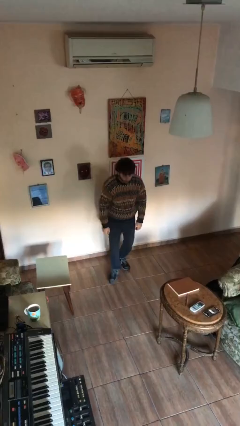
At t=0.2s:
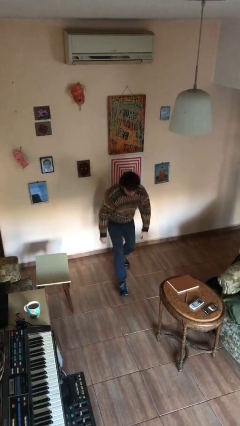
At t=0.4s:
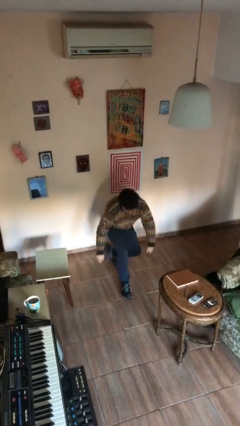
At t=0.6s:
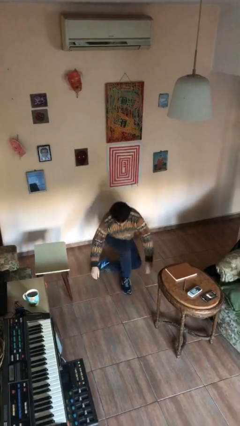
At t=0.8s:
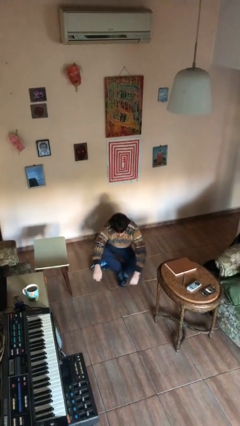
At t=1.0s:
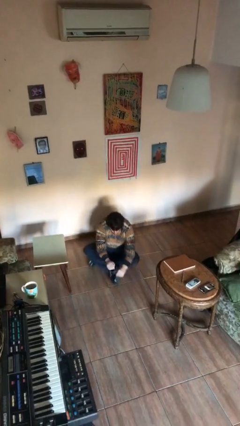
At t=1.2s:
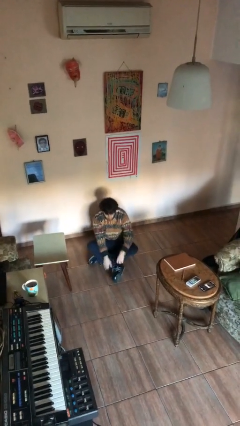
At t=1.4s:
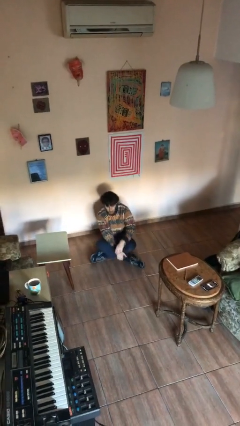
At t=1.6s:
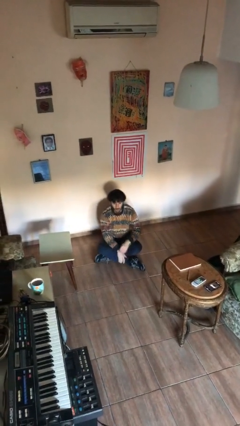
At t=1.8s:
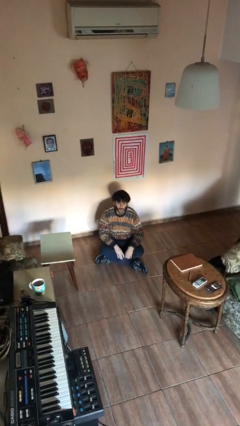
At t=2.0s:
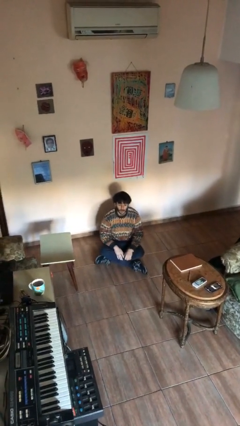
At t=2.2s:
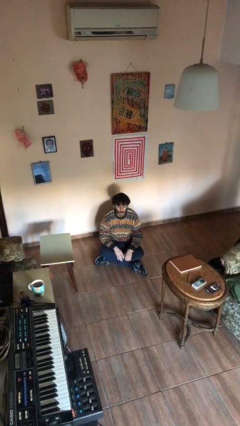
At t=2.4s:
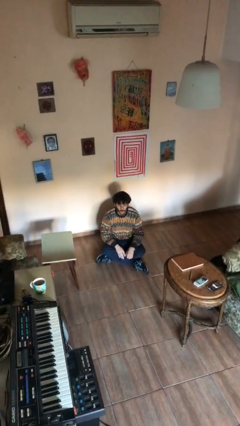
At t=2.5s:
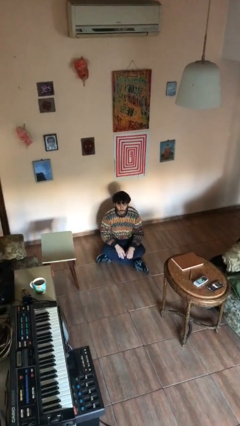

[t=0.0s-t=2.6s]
person sits crisscross

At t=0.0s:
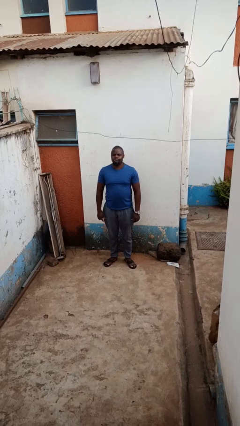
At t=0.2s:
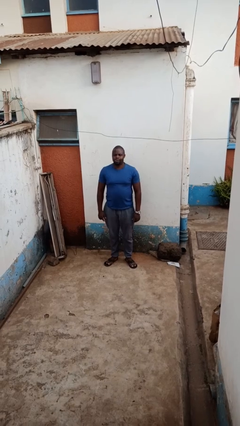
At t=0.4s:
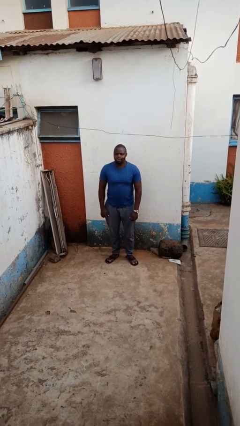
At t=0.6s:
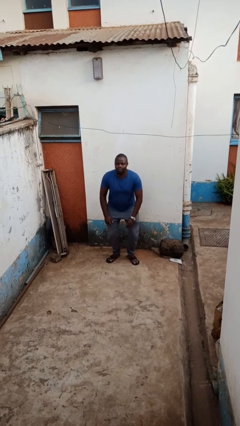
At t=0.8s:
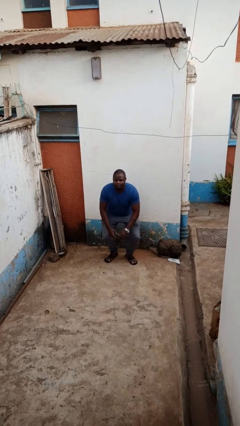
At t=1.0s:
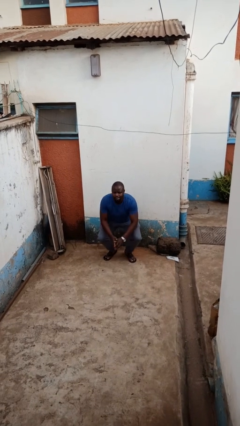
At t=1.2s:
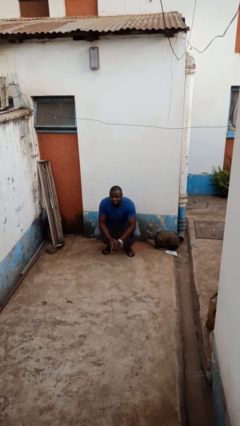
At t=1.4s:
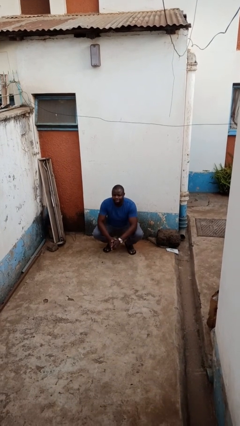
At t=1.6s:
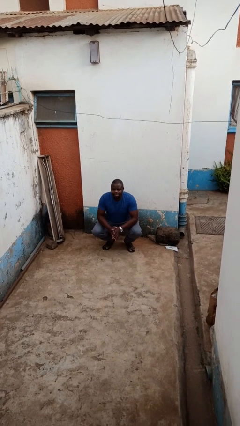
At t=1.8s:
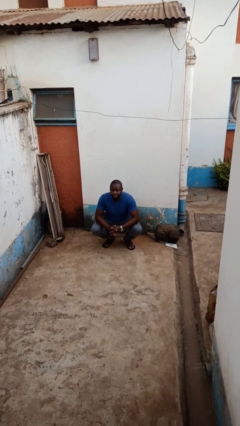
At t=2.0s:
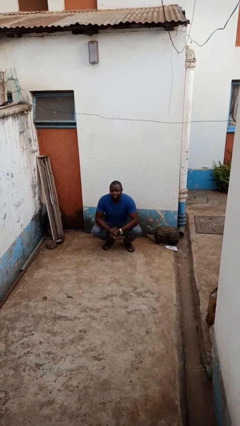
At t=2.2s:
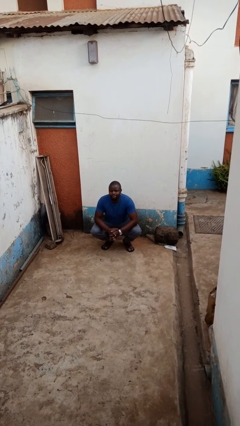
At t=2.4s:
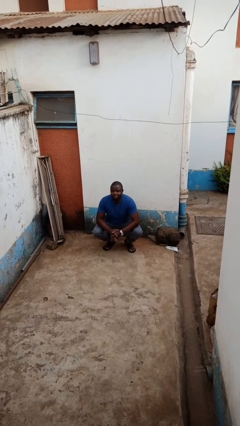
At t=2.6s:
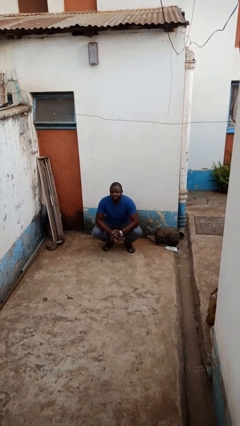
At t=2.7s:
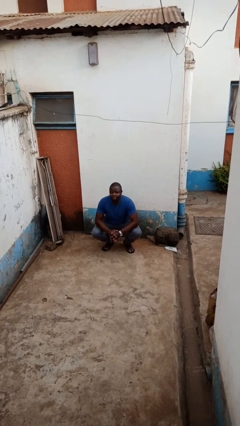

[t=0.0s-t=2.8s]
person squats

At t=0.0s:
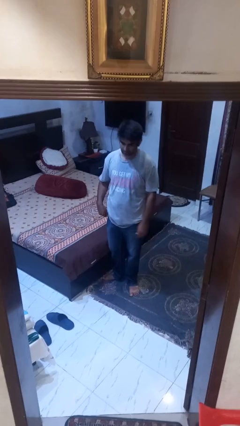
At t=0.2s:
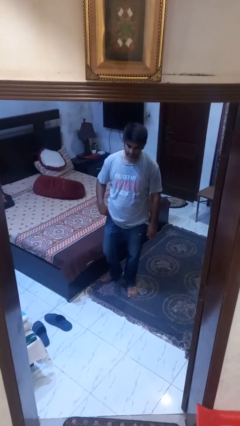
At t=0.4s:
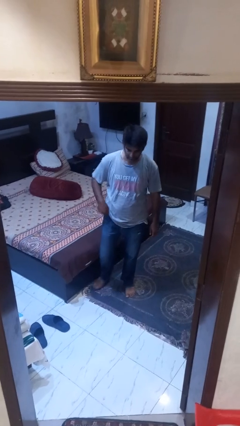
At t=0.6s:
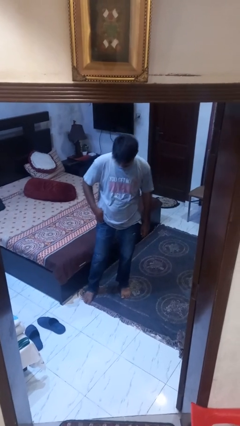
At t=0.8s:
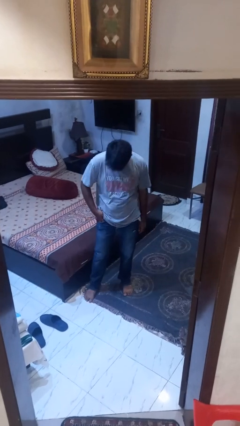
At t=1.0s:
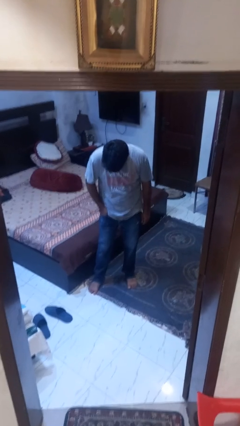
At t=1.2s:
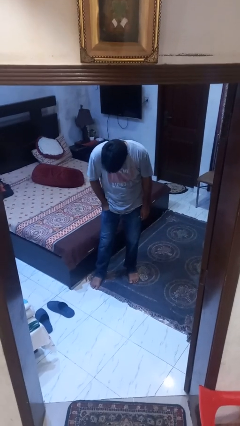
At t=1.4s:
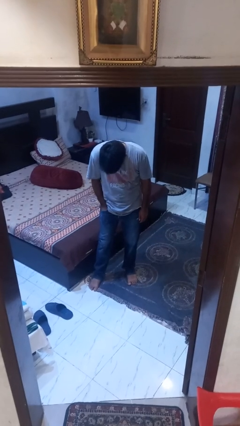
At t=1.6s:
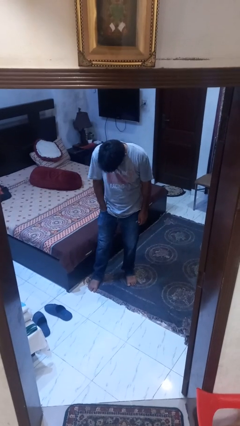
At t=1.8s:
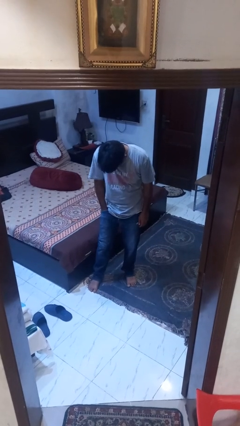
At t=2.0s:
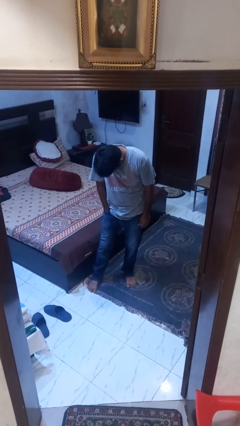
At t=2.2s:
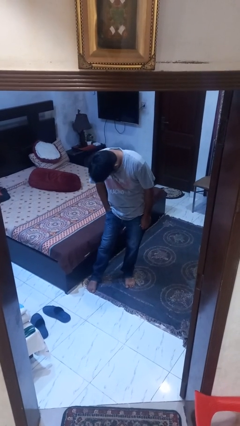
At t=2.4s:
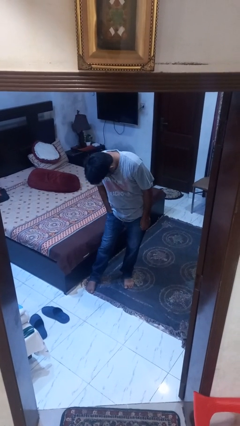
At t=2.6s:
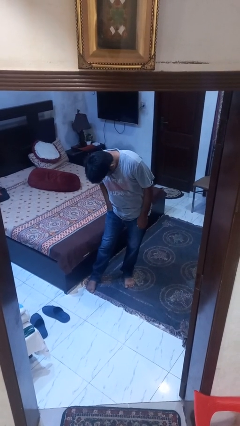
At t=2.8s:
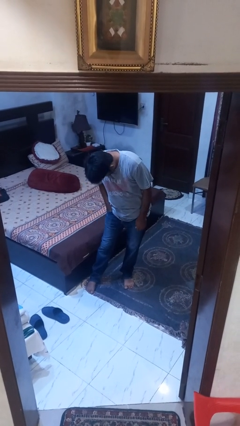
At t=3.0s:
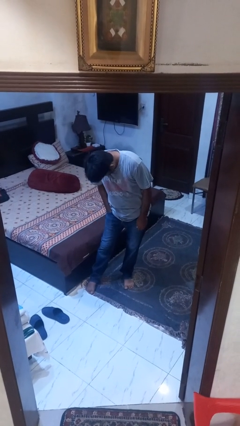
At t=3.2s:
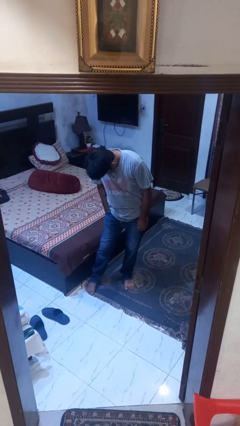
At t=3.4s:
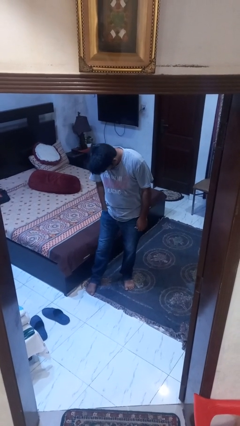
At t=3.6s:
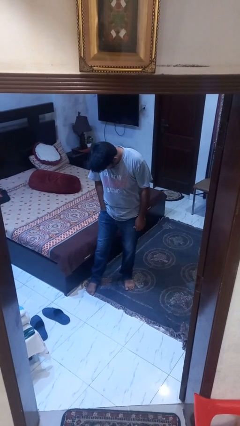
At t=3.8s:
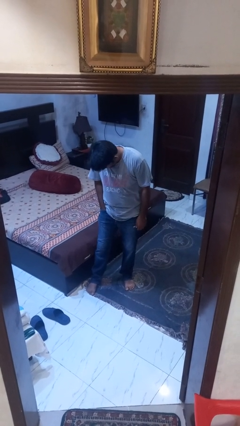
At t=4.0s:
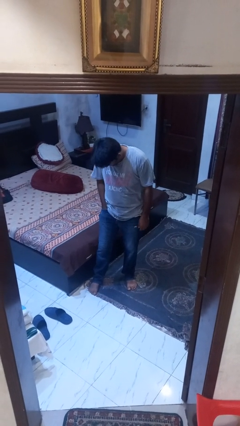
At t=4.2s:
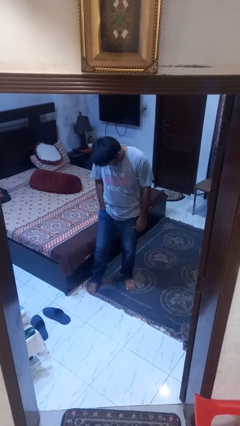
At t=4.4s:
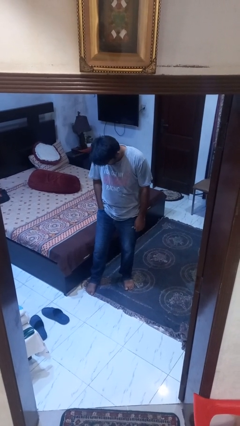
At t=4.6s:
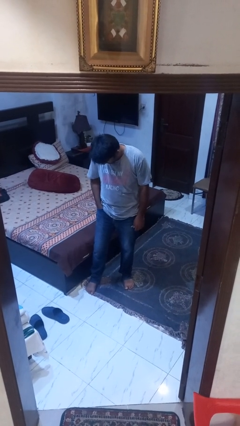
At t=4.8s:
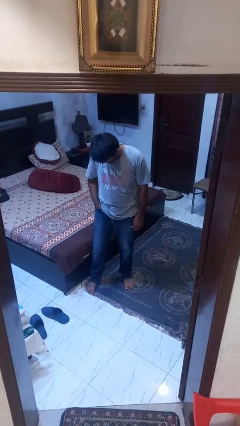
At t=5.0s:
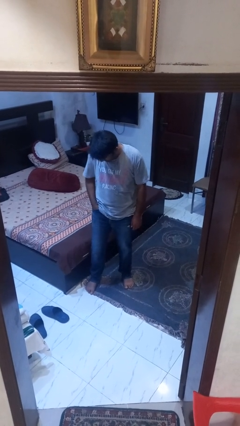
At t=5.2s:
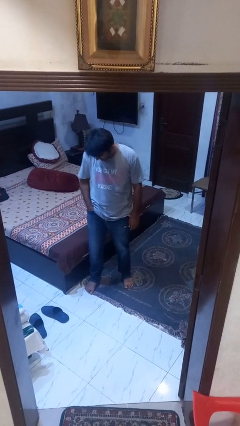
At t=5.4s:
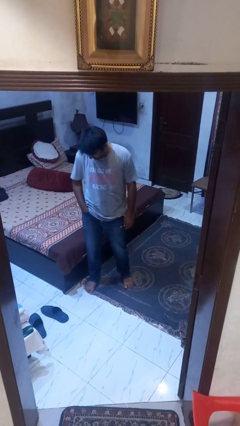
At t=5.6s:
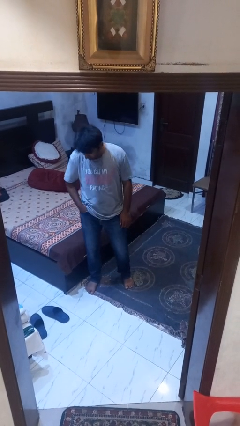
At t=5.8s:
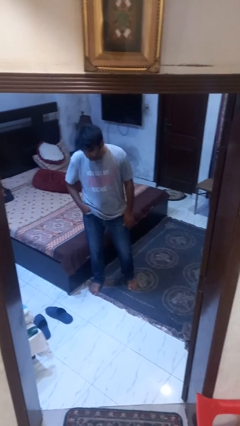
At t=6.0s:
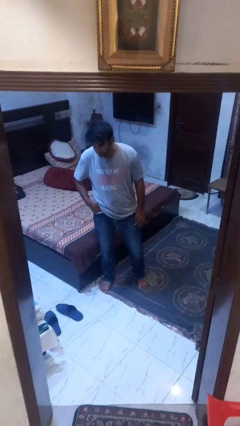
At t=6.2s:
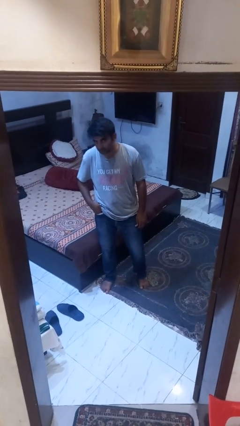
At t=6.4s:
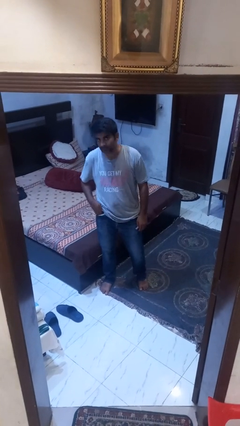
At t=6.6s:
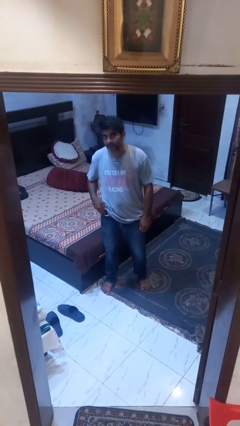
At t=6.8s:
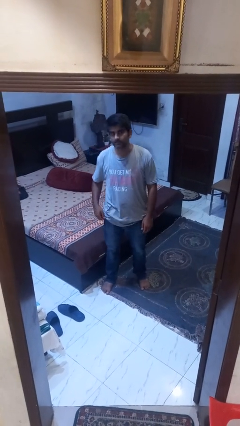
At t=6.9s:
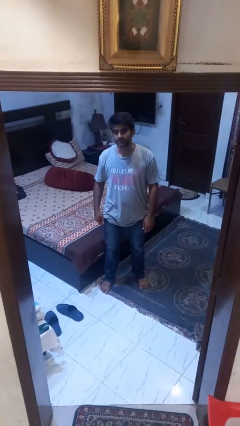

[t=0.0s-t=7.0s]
person puts hands in back pockets

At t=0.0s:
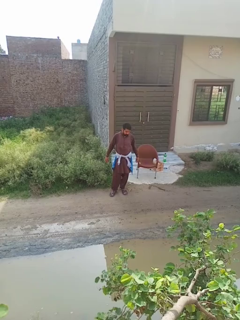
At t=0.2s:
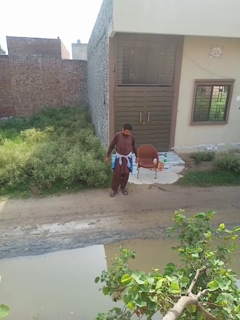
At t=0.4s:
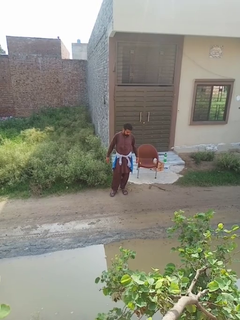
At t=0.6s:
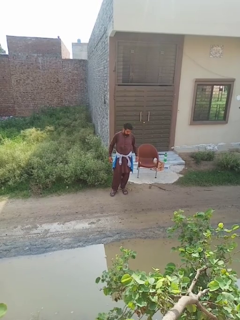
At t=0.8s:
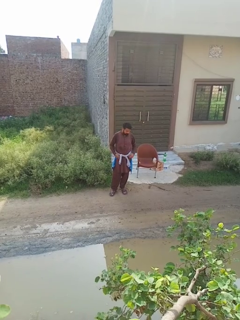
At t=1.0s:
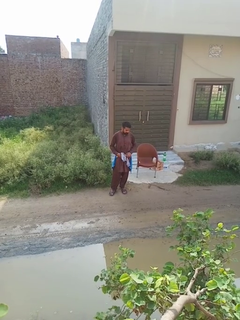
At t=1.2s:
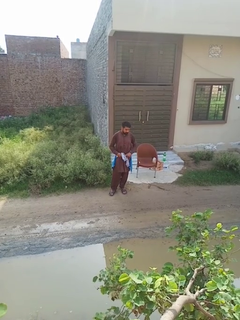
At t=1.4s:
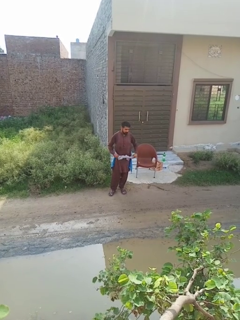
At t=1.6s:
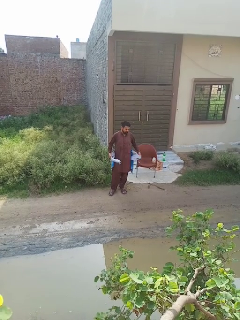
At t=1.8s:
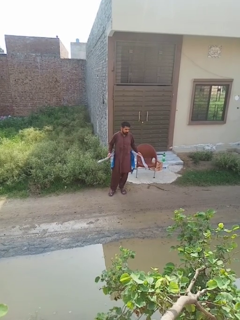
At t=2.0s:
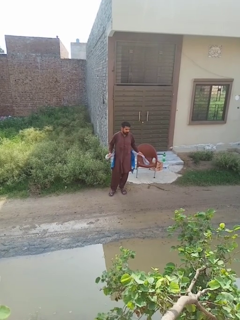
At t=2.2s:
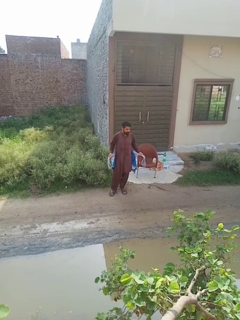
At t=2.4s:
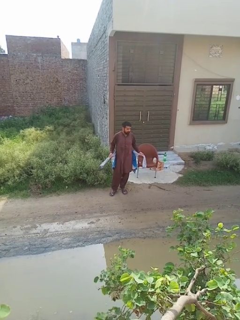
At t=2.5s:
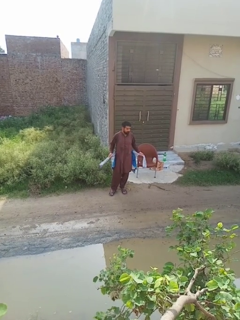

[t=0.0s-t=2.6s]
person unties jacket around waist

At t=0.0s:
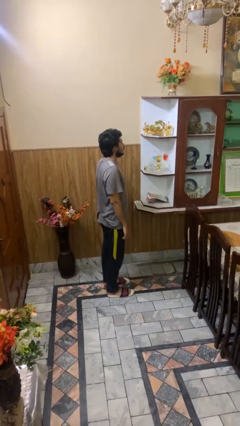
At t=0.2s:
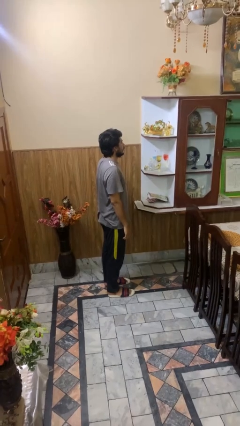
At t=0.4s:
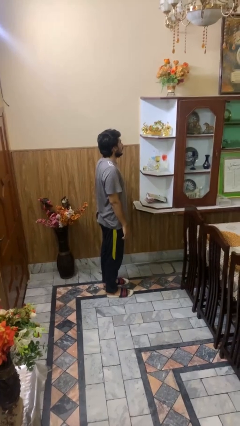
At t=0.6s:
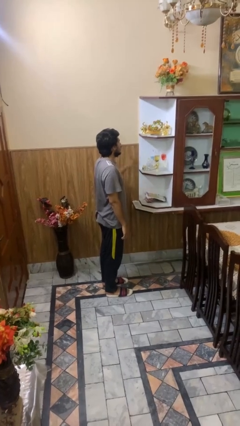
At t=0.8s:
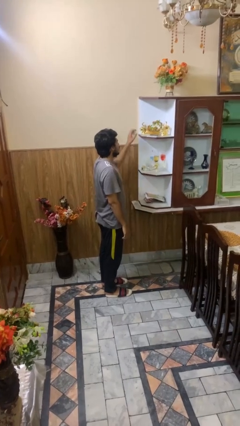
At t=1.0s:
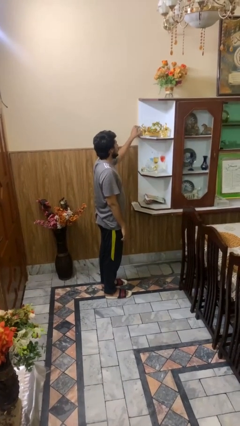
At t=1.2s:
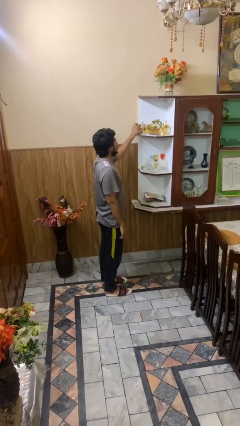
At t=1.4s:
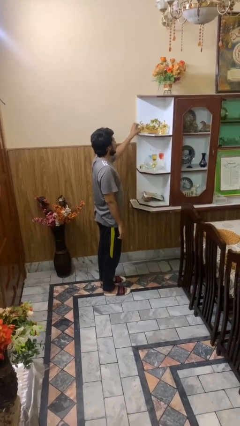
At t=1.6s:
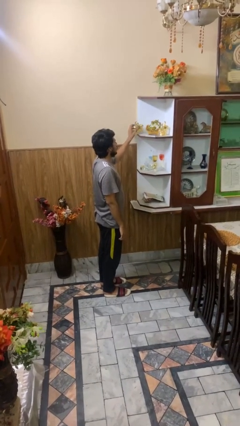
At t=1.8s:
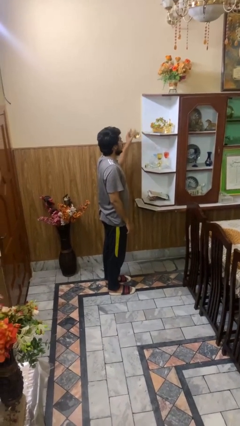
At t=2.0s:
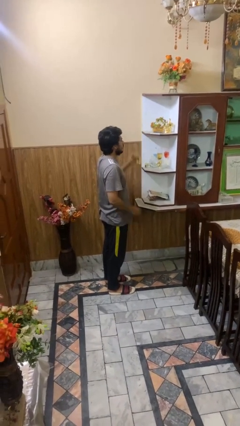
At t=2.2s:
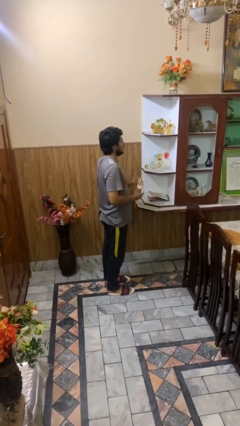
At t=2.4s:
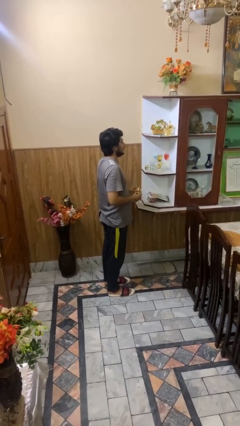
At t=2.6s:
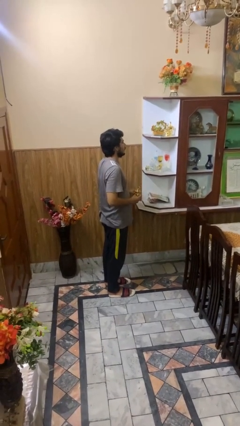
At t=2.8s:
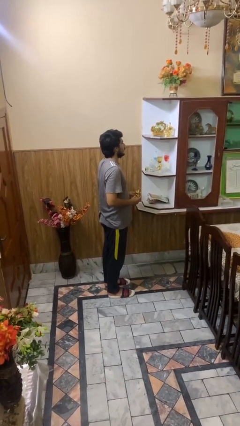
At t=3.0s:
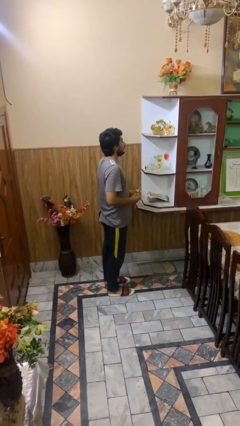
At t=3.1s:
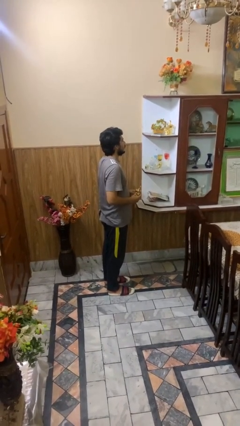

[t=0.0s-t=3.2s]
person picks up object from shelf
